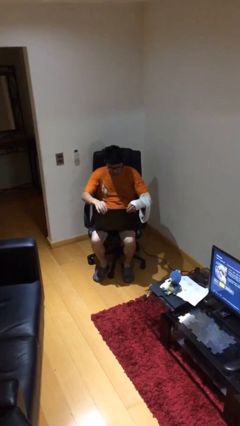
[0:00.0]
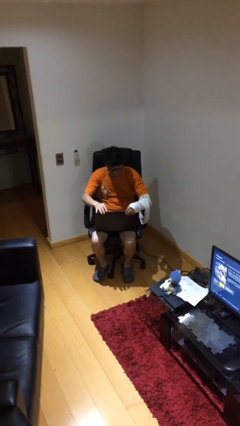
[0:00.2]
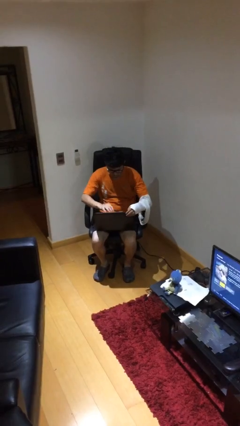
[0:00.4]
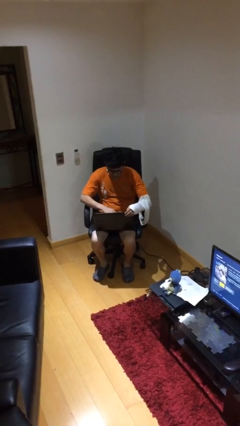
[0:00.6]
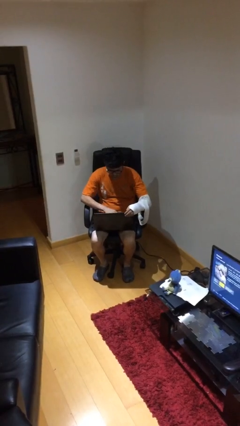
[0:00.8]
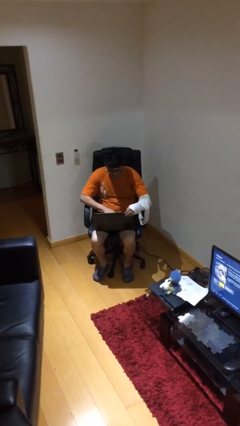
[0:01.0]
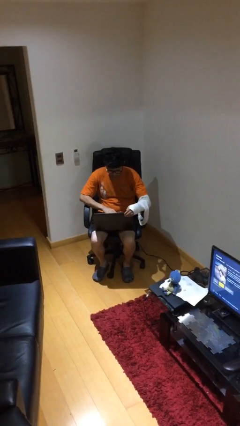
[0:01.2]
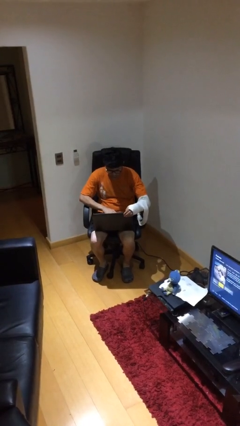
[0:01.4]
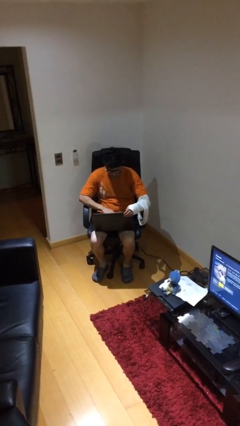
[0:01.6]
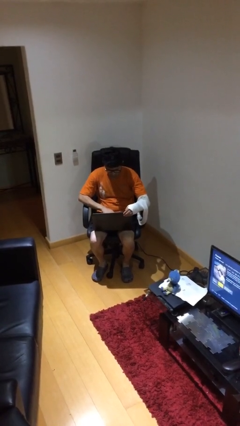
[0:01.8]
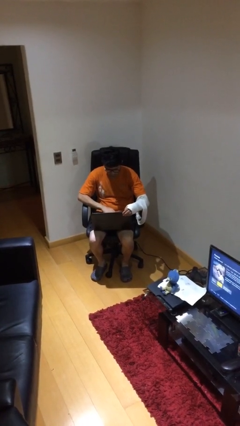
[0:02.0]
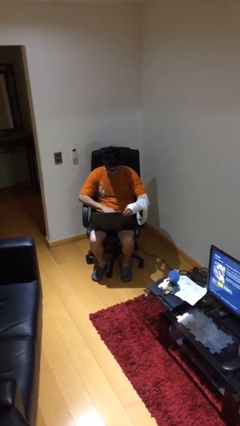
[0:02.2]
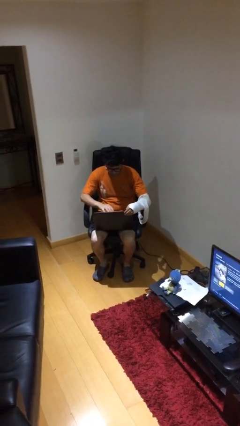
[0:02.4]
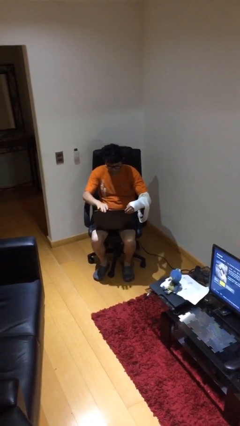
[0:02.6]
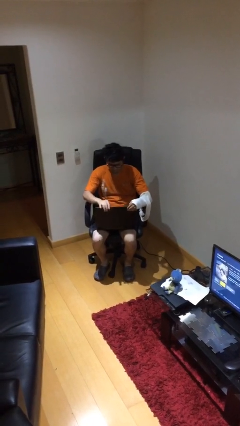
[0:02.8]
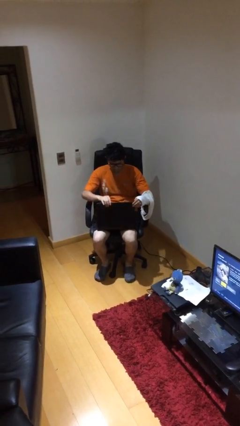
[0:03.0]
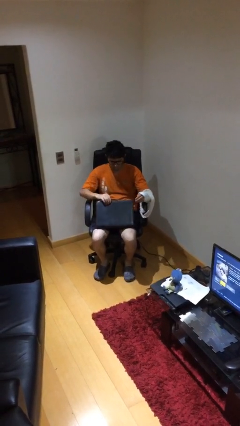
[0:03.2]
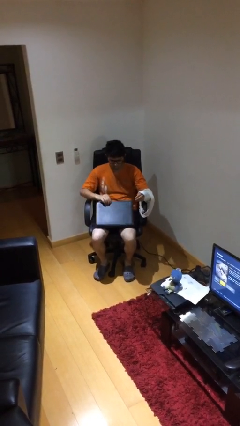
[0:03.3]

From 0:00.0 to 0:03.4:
person interacts with laptop

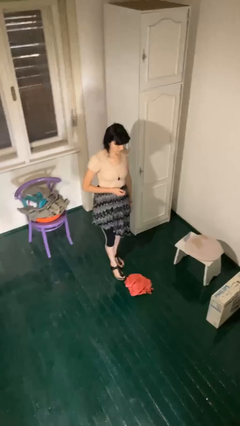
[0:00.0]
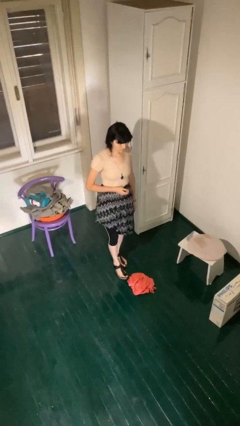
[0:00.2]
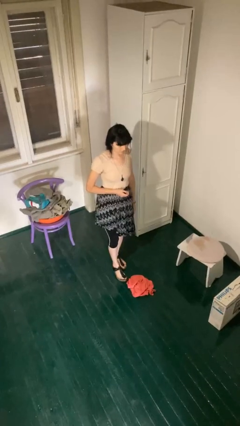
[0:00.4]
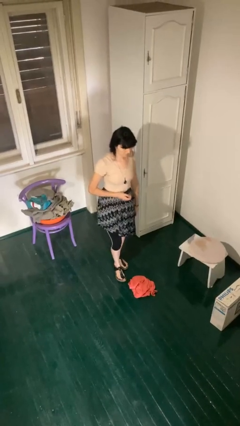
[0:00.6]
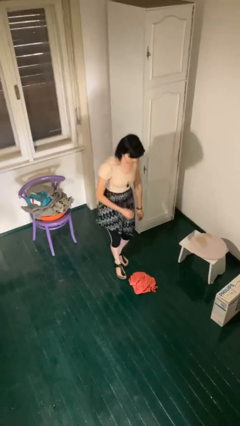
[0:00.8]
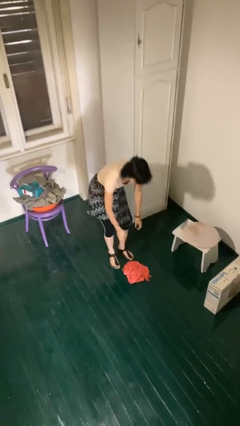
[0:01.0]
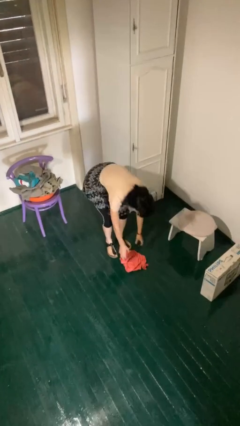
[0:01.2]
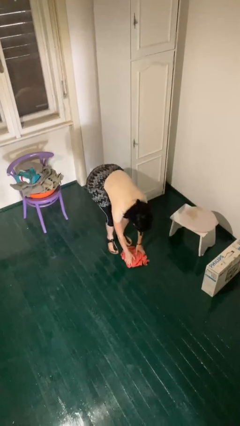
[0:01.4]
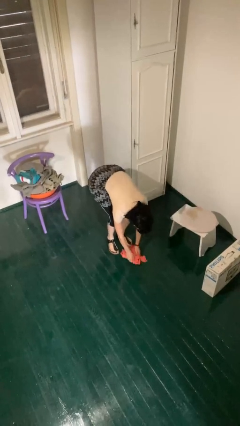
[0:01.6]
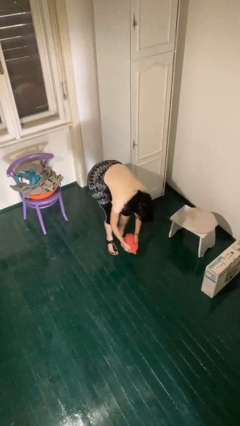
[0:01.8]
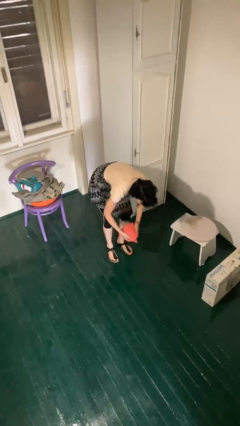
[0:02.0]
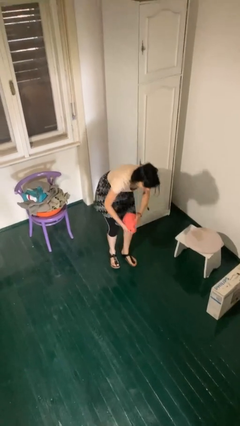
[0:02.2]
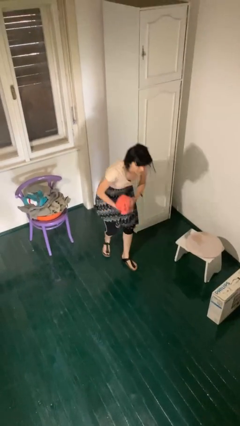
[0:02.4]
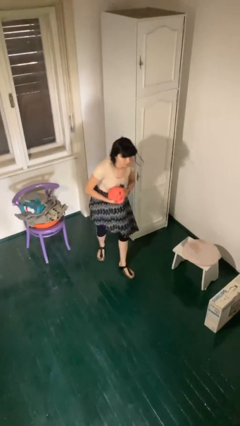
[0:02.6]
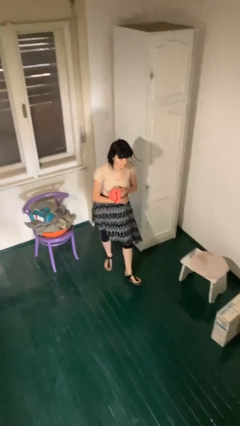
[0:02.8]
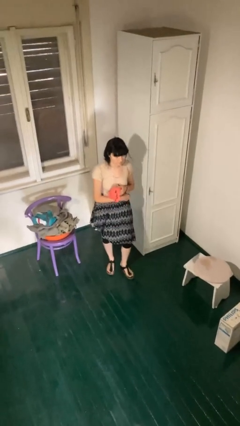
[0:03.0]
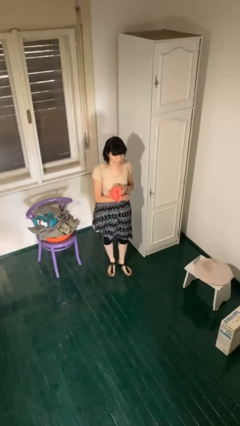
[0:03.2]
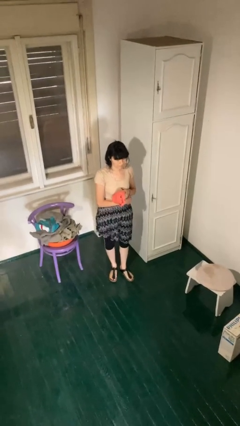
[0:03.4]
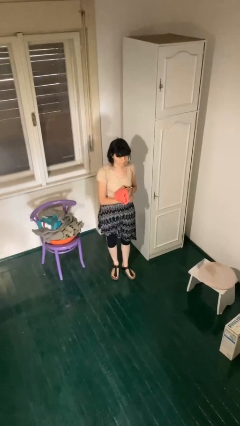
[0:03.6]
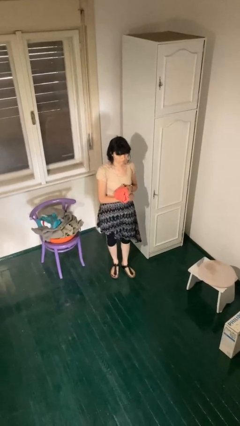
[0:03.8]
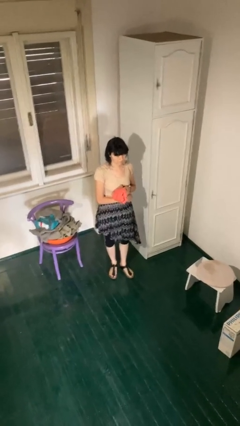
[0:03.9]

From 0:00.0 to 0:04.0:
person picks up object from floor

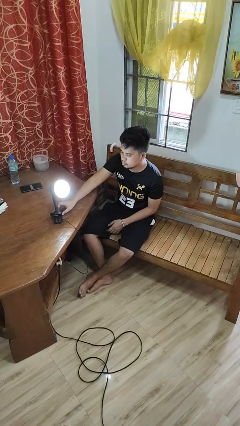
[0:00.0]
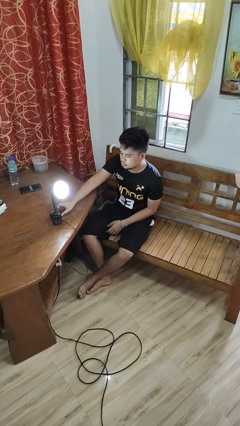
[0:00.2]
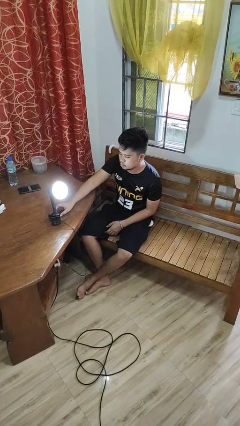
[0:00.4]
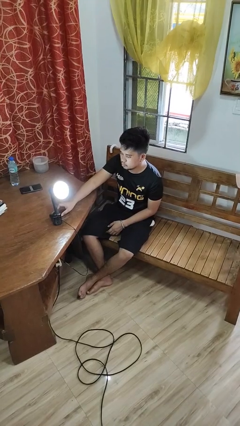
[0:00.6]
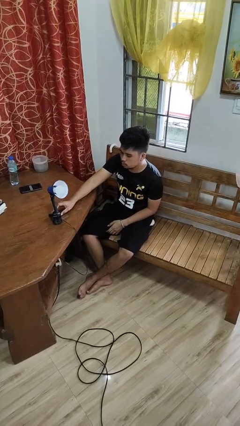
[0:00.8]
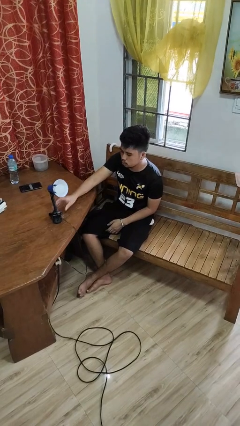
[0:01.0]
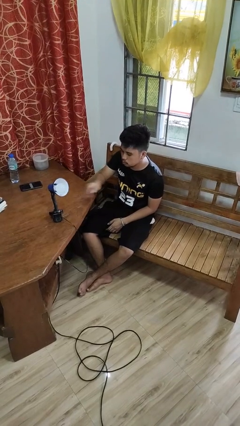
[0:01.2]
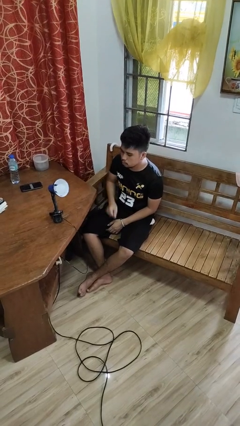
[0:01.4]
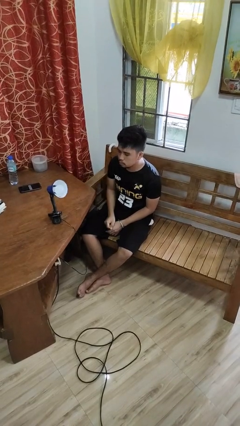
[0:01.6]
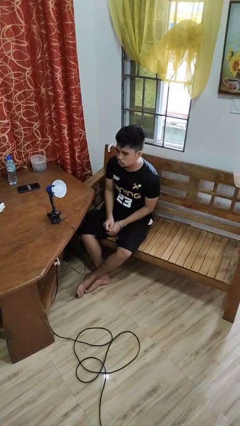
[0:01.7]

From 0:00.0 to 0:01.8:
person turns off lamp

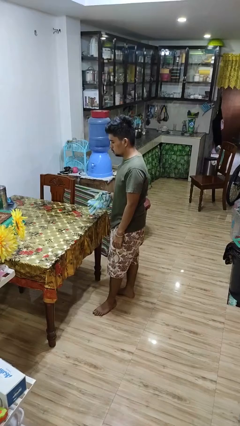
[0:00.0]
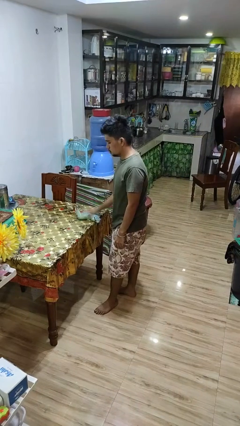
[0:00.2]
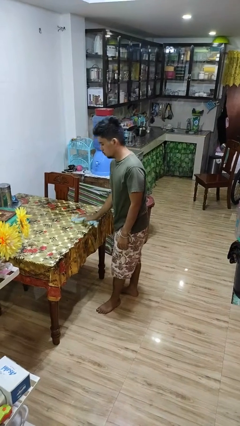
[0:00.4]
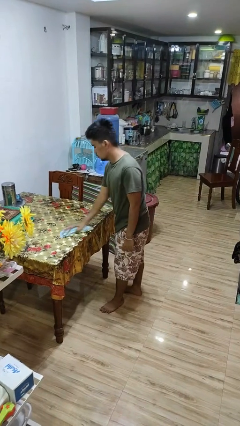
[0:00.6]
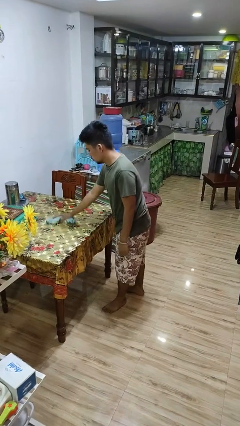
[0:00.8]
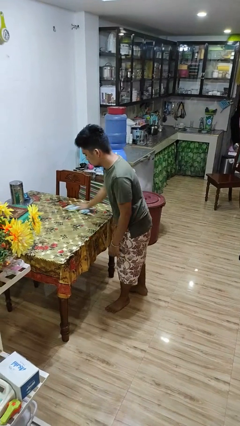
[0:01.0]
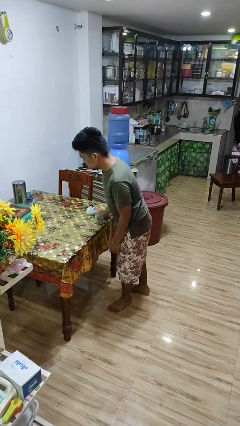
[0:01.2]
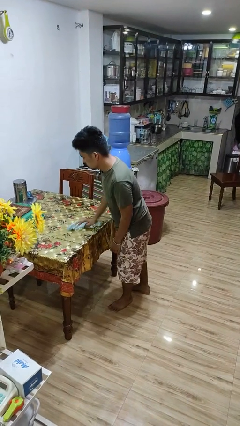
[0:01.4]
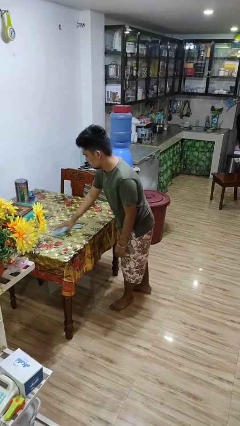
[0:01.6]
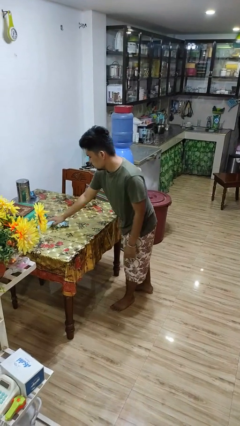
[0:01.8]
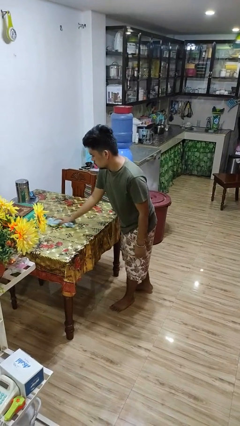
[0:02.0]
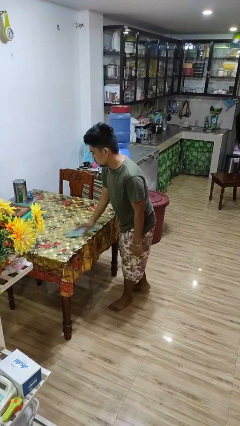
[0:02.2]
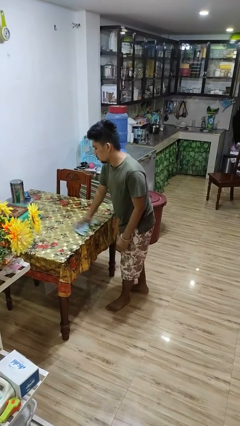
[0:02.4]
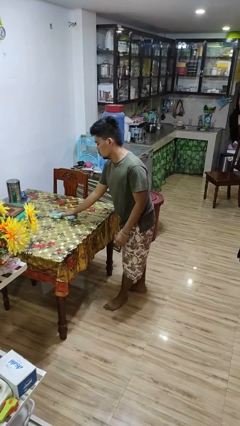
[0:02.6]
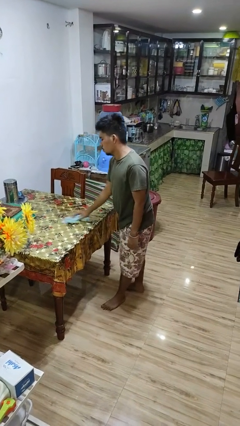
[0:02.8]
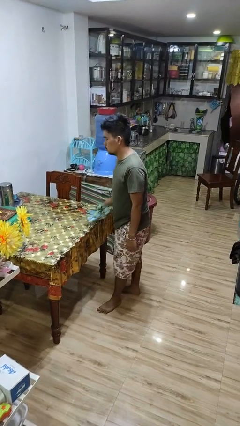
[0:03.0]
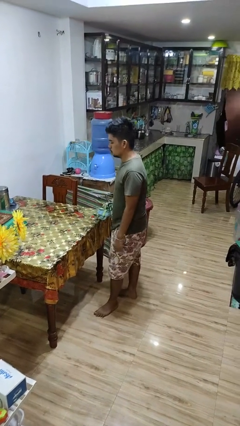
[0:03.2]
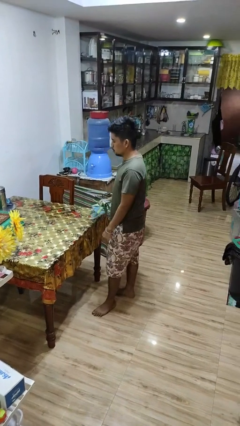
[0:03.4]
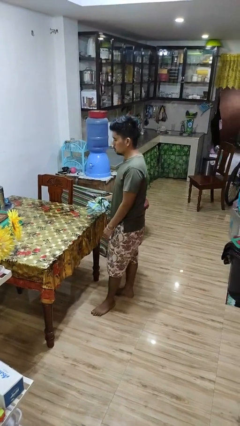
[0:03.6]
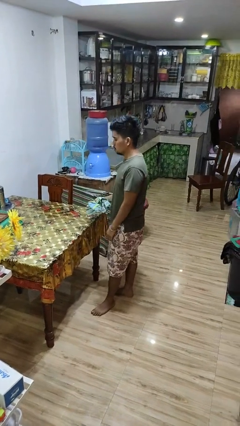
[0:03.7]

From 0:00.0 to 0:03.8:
person cleans table with rag

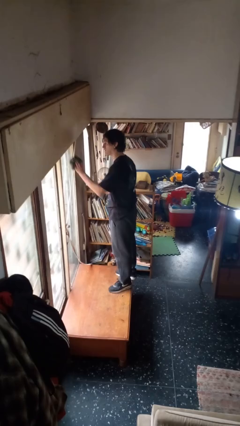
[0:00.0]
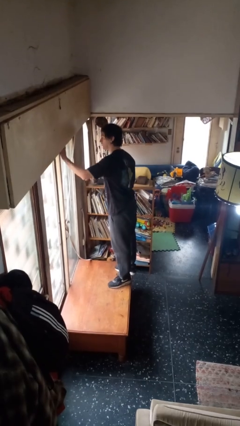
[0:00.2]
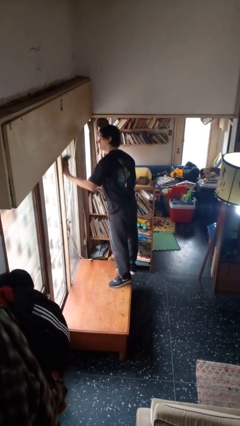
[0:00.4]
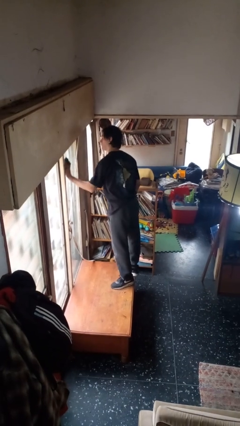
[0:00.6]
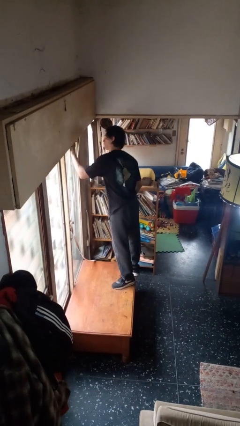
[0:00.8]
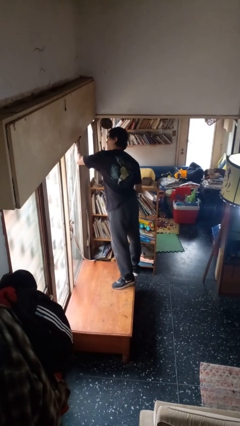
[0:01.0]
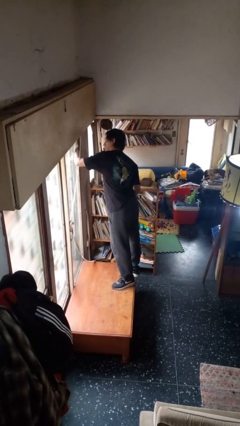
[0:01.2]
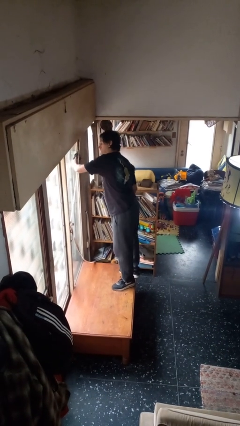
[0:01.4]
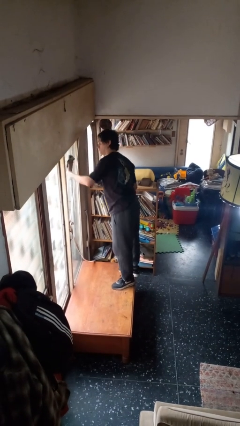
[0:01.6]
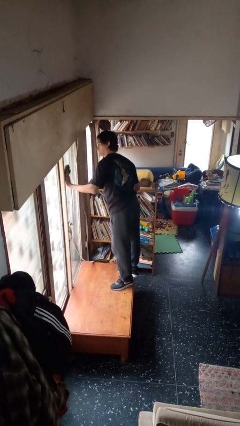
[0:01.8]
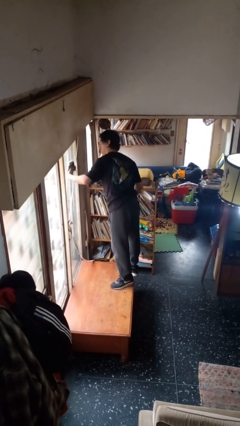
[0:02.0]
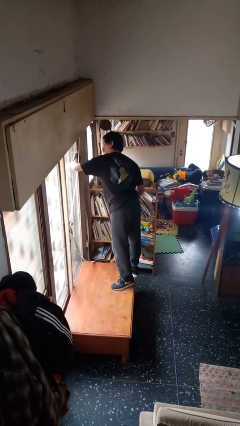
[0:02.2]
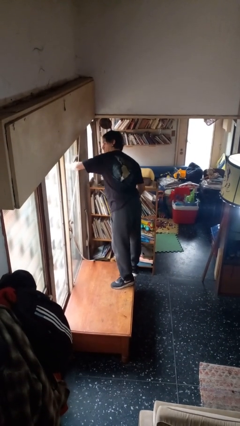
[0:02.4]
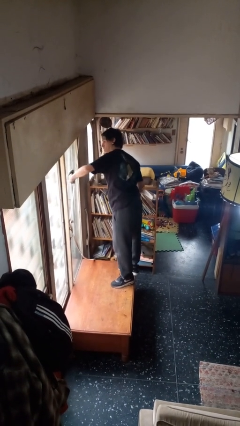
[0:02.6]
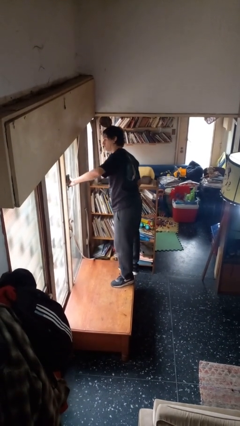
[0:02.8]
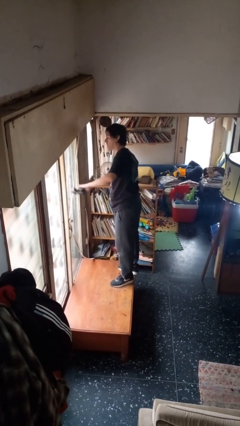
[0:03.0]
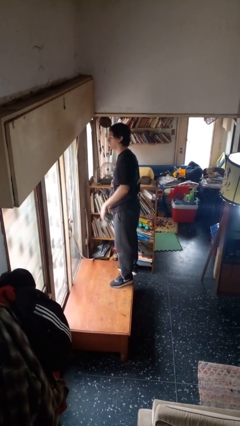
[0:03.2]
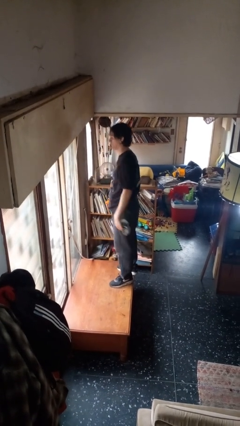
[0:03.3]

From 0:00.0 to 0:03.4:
person washes window

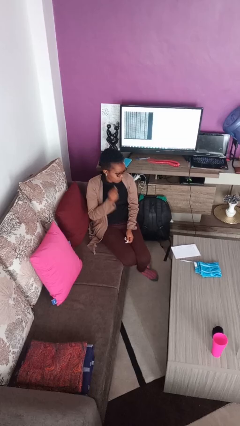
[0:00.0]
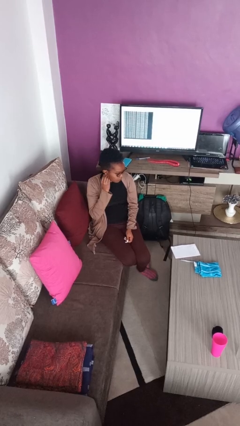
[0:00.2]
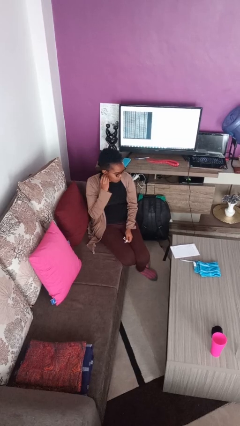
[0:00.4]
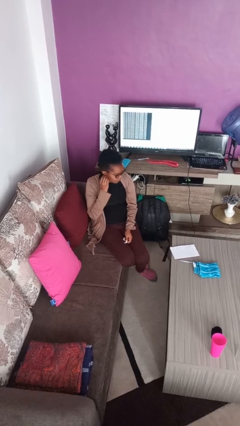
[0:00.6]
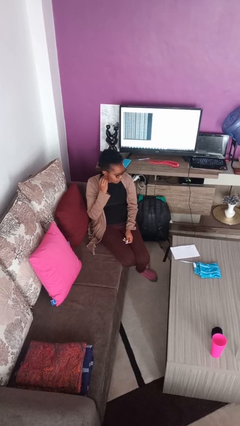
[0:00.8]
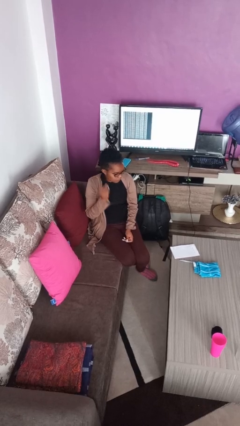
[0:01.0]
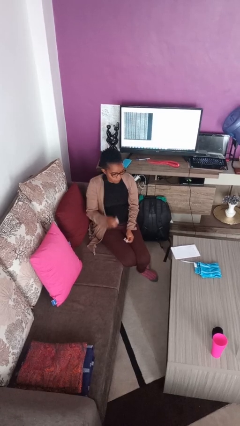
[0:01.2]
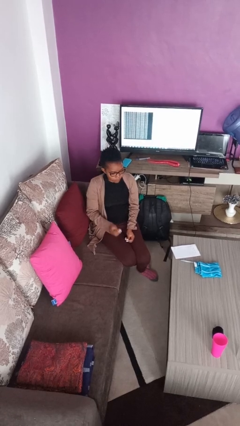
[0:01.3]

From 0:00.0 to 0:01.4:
person takes off earrings
